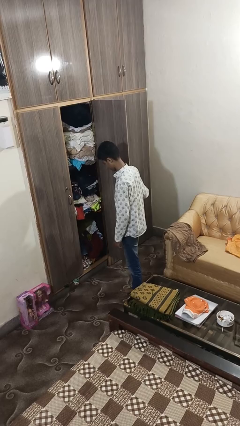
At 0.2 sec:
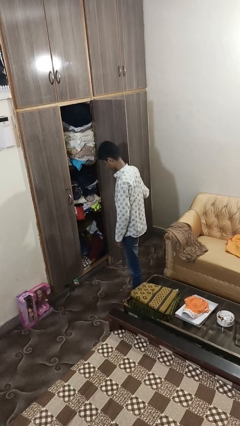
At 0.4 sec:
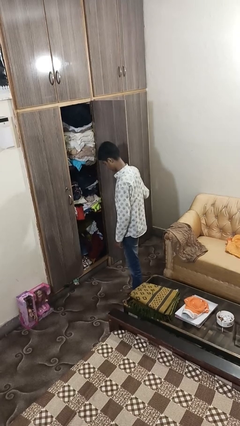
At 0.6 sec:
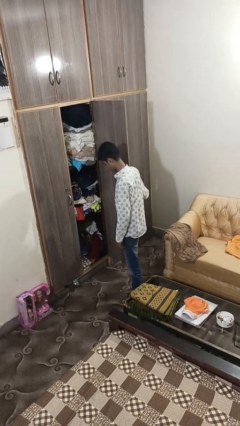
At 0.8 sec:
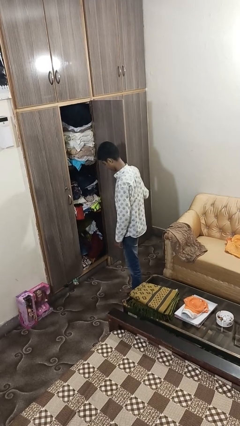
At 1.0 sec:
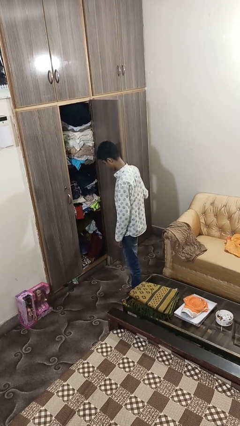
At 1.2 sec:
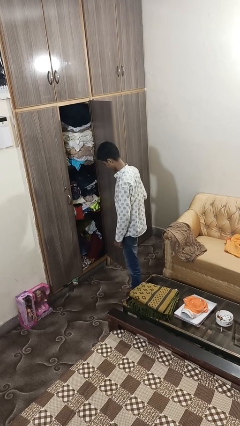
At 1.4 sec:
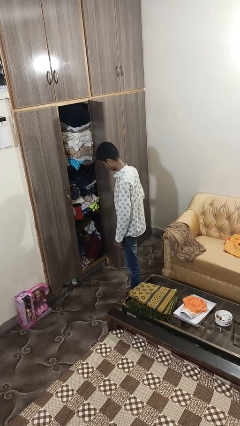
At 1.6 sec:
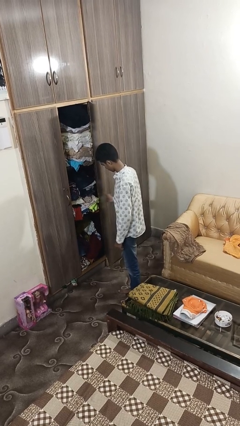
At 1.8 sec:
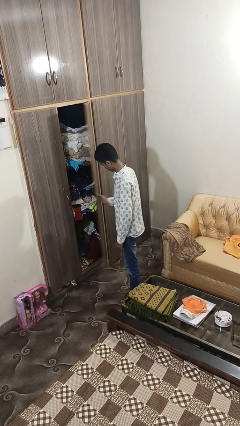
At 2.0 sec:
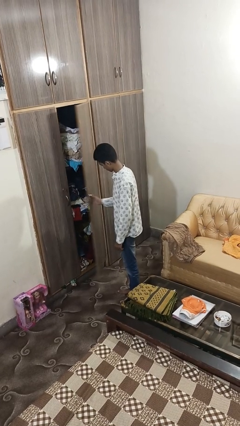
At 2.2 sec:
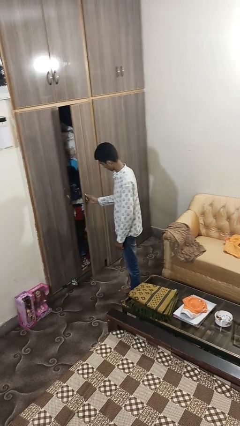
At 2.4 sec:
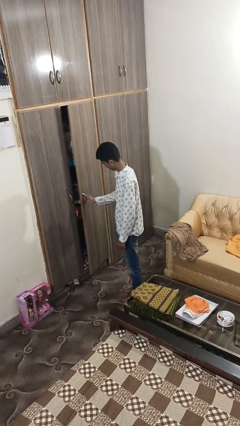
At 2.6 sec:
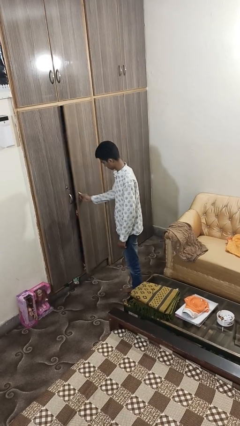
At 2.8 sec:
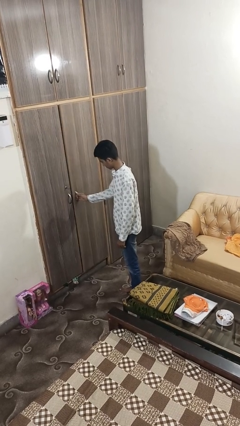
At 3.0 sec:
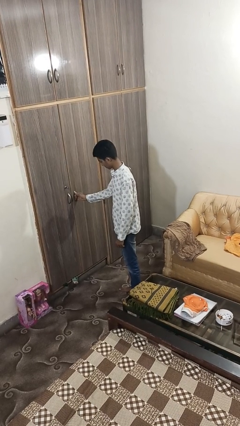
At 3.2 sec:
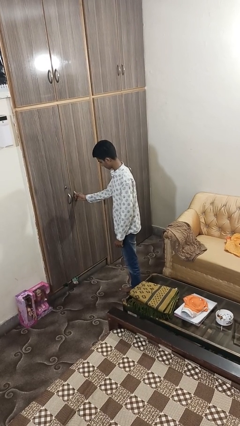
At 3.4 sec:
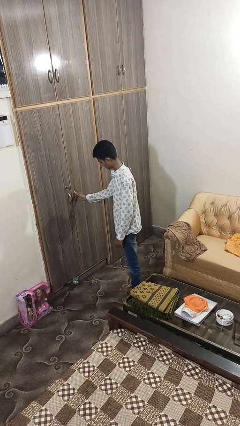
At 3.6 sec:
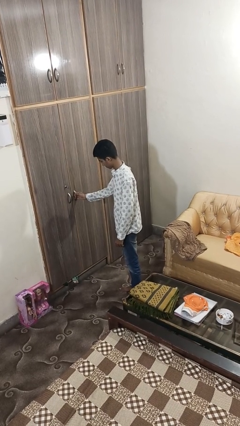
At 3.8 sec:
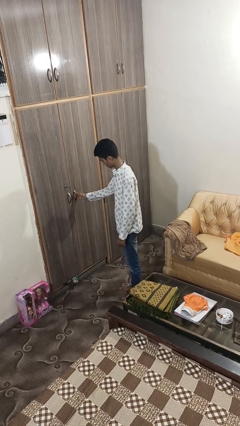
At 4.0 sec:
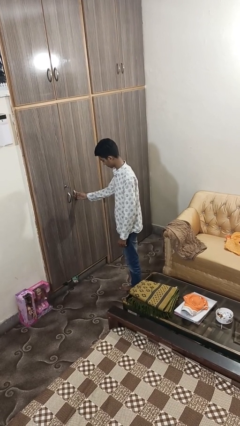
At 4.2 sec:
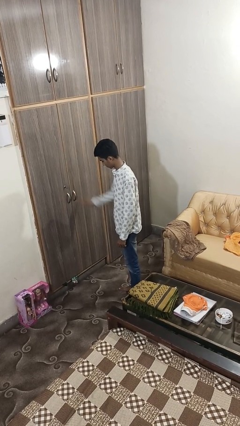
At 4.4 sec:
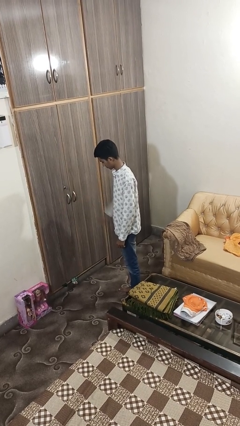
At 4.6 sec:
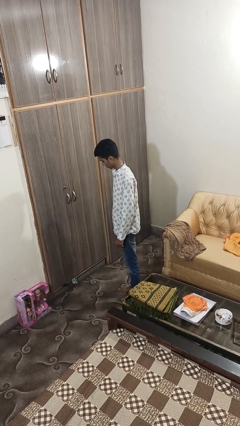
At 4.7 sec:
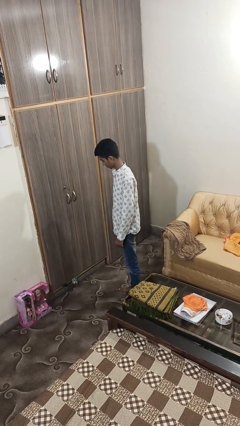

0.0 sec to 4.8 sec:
person closes closet door

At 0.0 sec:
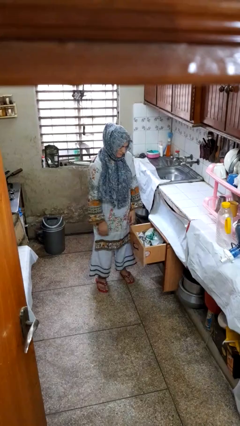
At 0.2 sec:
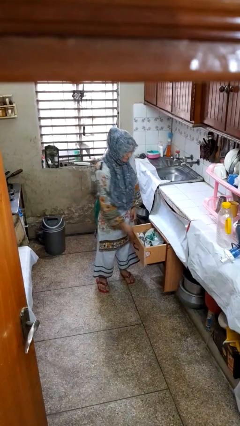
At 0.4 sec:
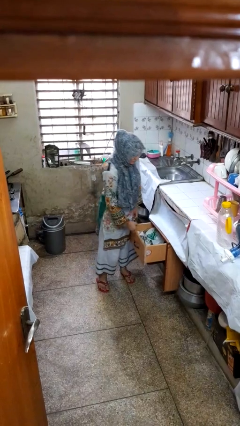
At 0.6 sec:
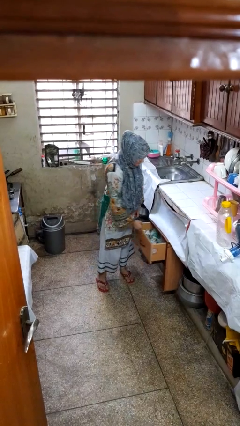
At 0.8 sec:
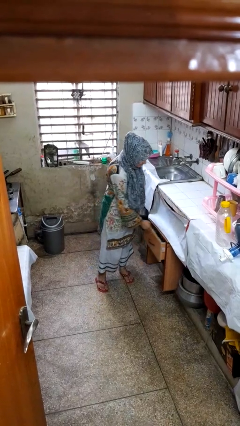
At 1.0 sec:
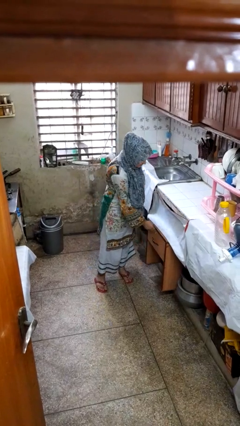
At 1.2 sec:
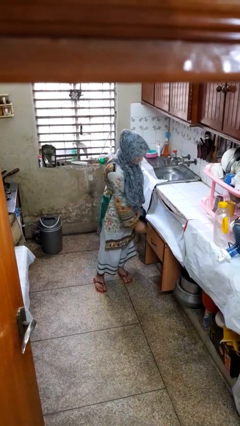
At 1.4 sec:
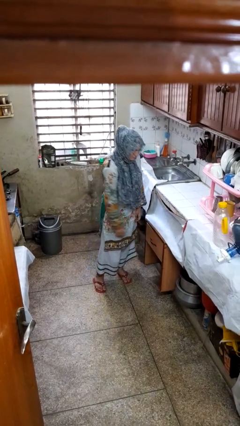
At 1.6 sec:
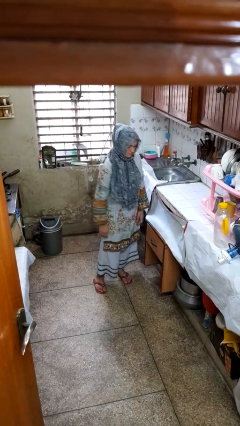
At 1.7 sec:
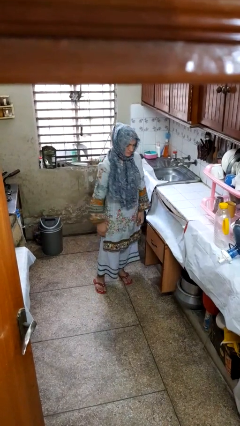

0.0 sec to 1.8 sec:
person closes kitchen drawer

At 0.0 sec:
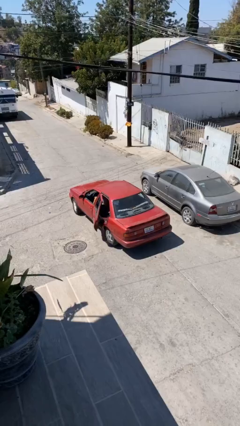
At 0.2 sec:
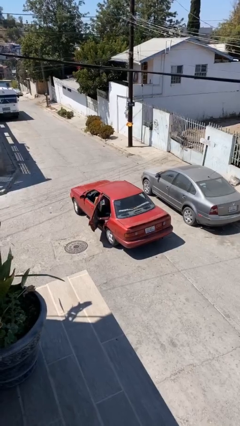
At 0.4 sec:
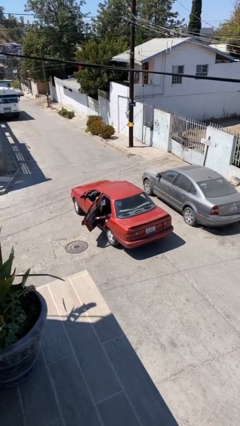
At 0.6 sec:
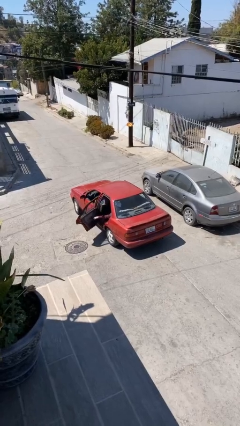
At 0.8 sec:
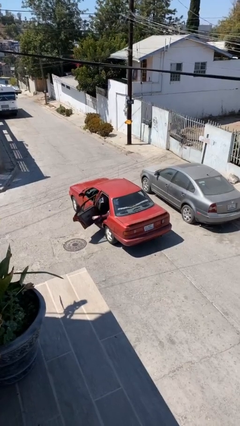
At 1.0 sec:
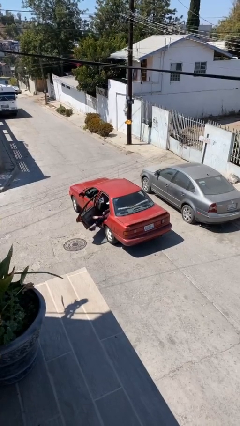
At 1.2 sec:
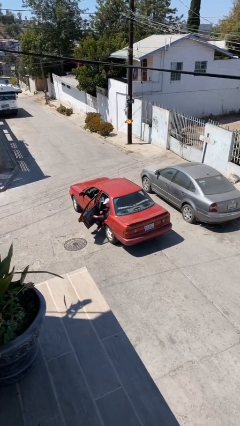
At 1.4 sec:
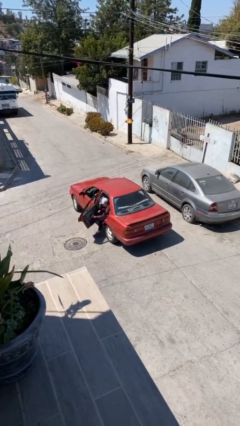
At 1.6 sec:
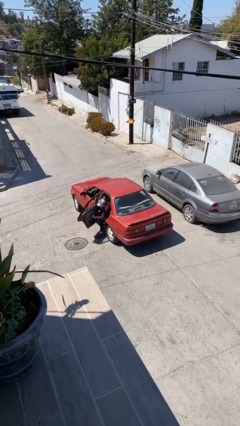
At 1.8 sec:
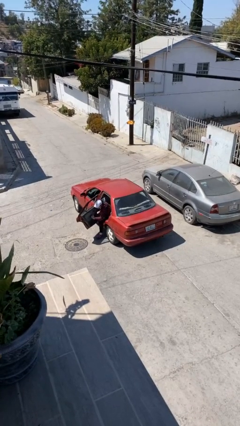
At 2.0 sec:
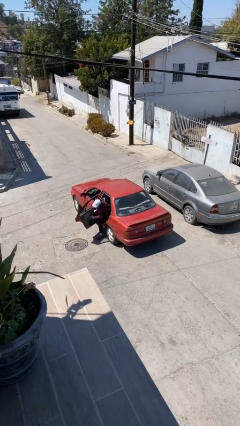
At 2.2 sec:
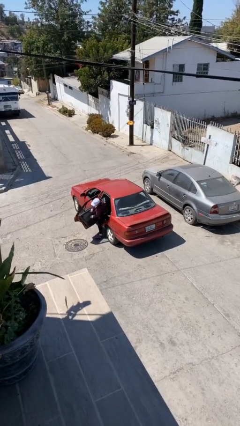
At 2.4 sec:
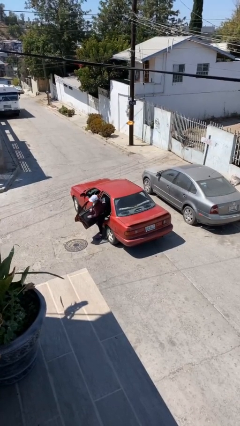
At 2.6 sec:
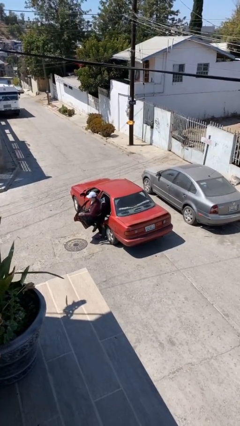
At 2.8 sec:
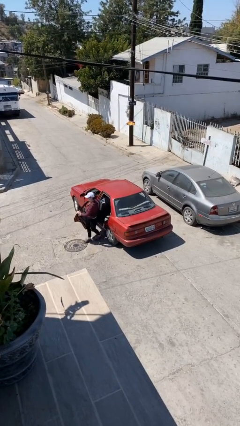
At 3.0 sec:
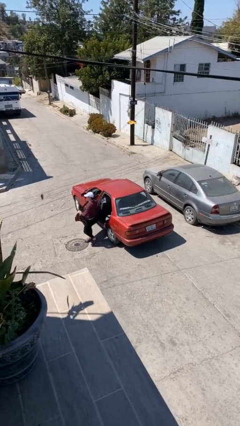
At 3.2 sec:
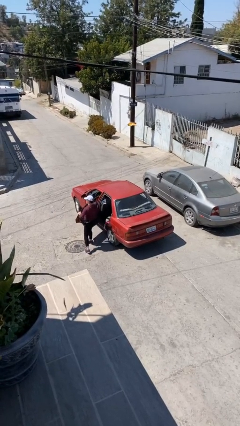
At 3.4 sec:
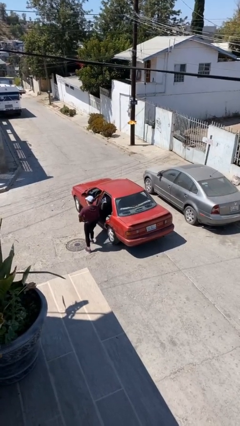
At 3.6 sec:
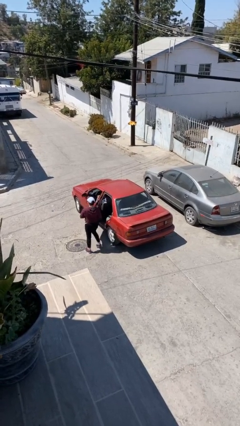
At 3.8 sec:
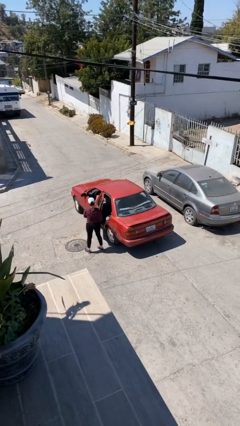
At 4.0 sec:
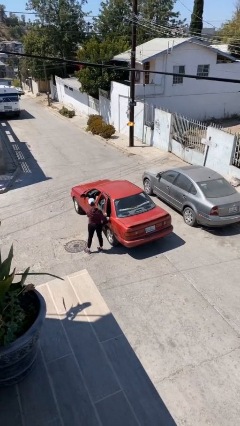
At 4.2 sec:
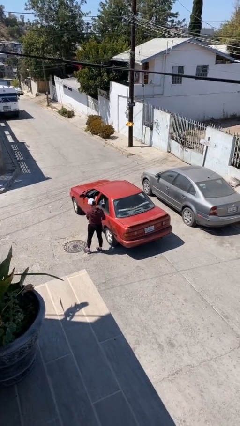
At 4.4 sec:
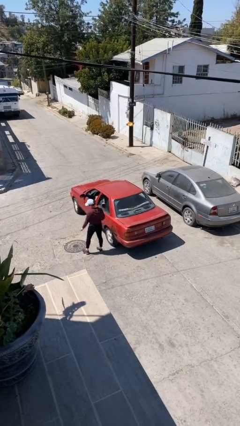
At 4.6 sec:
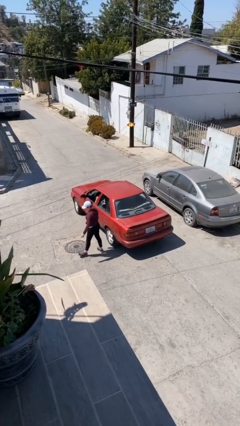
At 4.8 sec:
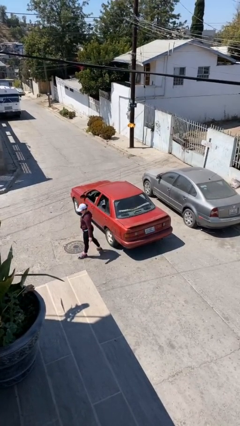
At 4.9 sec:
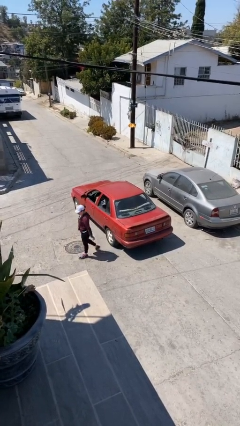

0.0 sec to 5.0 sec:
car drops off person

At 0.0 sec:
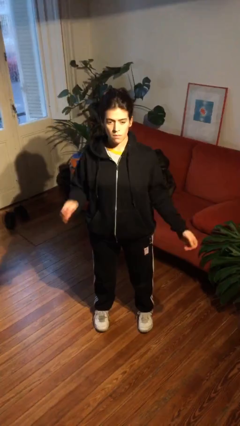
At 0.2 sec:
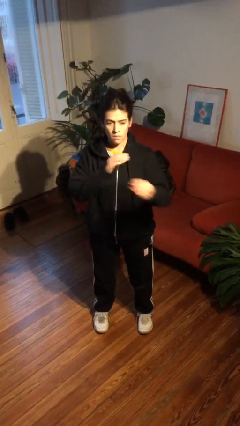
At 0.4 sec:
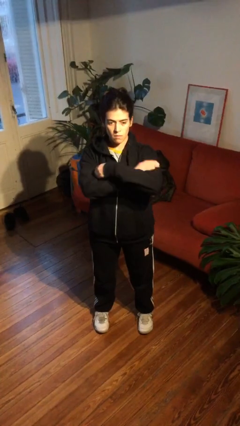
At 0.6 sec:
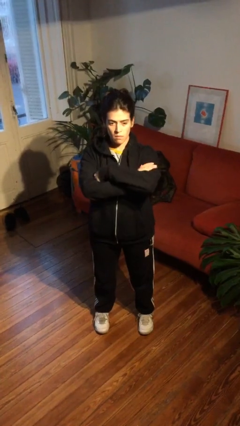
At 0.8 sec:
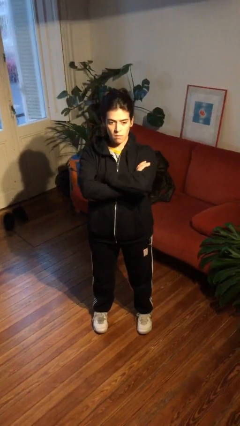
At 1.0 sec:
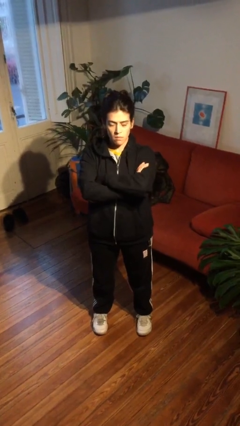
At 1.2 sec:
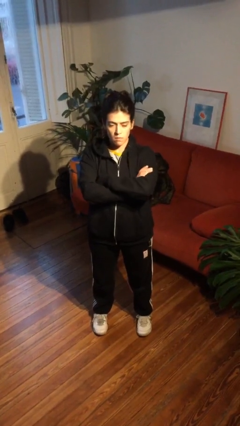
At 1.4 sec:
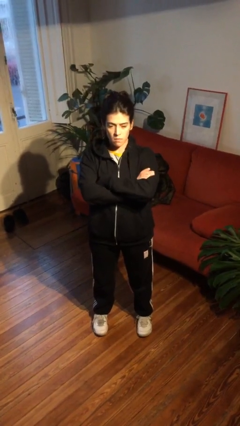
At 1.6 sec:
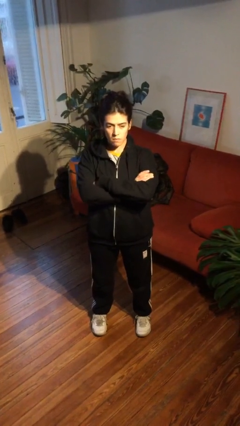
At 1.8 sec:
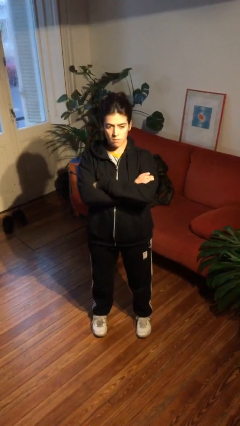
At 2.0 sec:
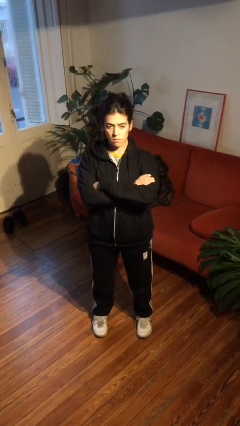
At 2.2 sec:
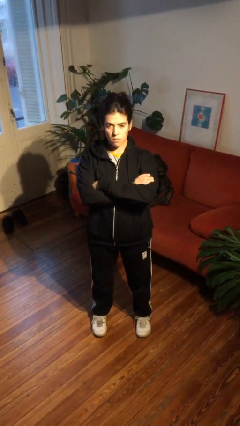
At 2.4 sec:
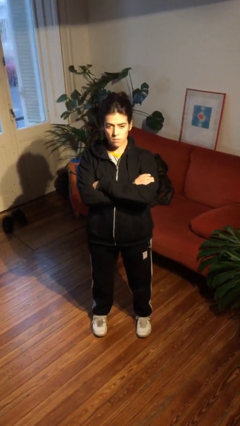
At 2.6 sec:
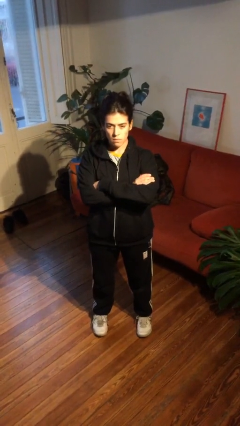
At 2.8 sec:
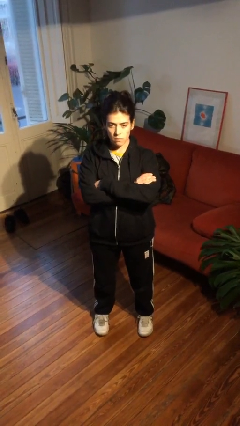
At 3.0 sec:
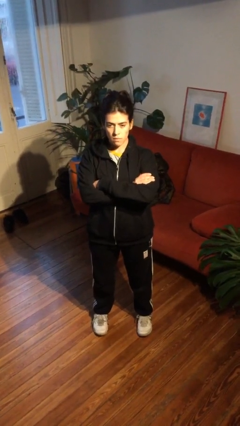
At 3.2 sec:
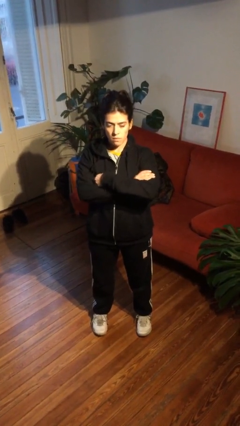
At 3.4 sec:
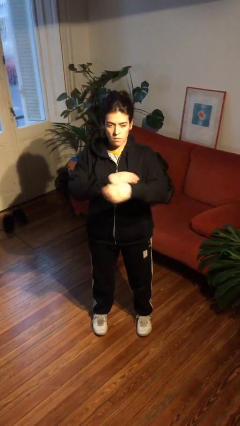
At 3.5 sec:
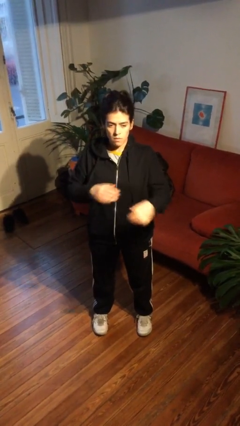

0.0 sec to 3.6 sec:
person crosses arms

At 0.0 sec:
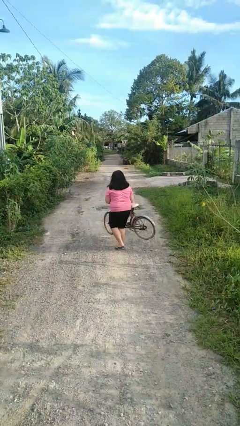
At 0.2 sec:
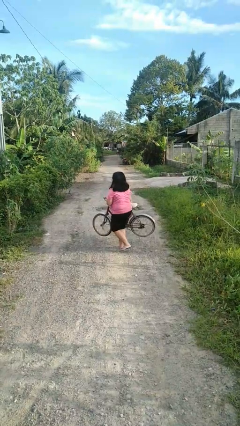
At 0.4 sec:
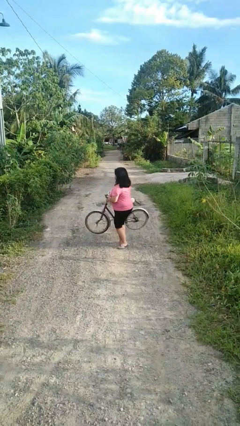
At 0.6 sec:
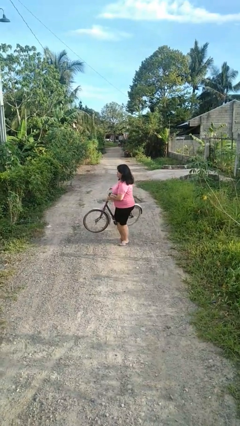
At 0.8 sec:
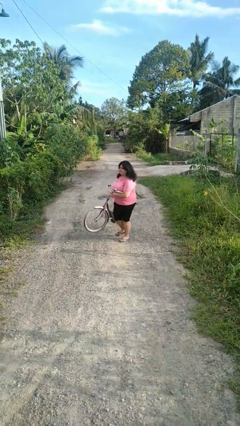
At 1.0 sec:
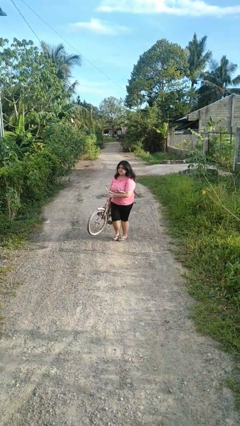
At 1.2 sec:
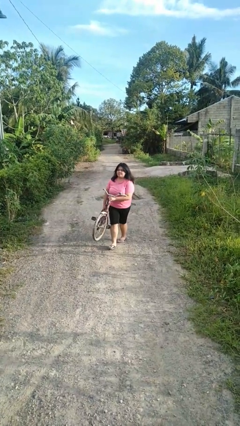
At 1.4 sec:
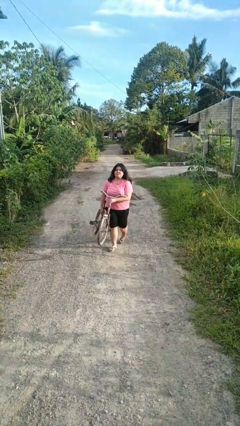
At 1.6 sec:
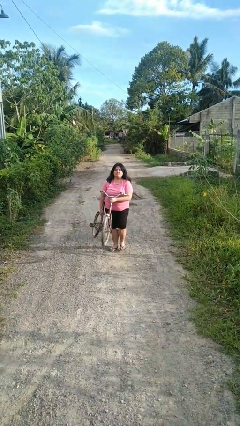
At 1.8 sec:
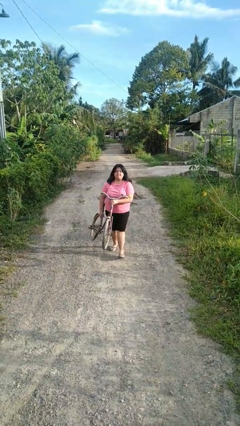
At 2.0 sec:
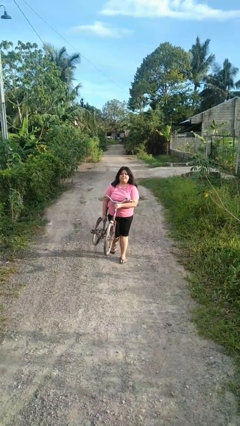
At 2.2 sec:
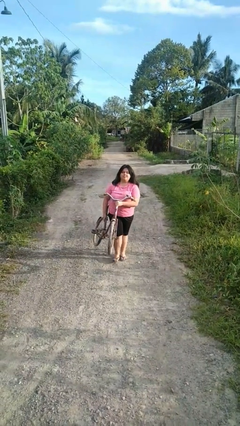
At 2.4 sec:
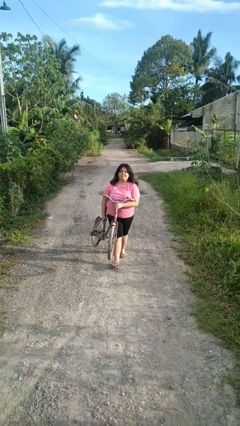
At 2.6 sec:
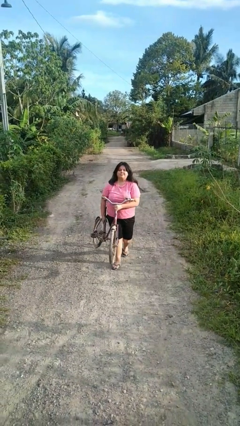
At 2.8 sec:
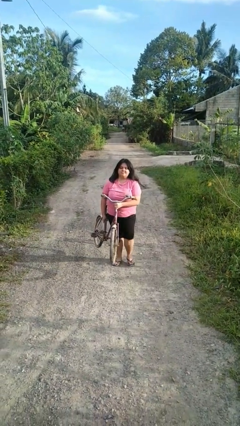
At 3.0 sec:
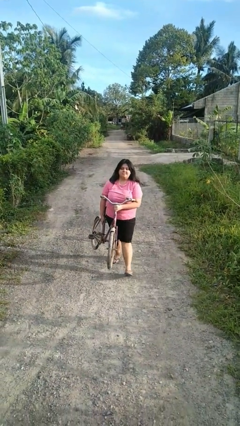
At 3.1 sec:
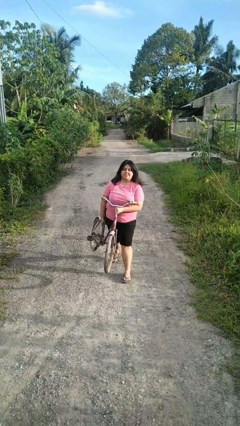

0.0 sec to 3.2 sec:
person carries bicycle
